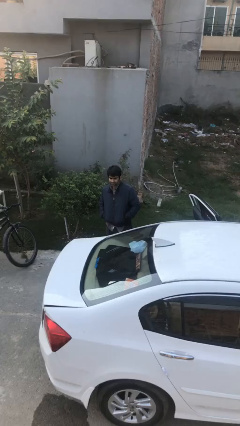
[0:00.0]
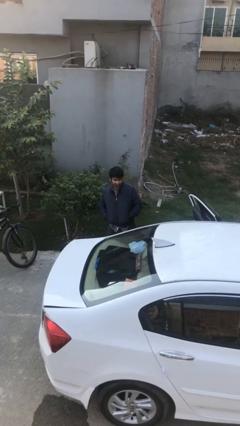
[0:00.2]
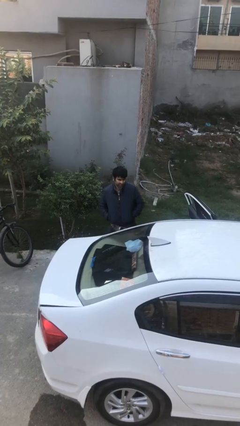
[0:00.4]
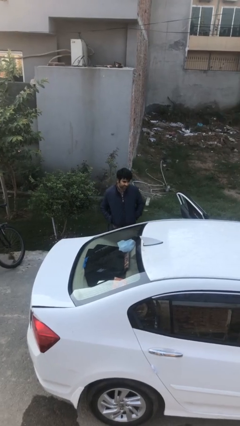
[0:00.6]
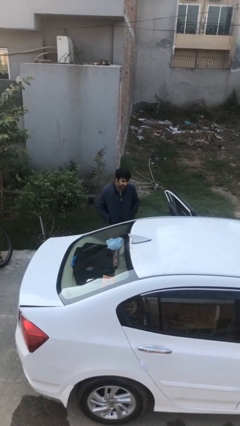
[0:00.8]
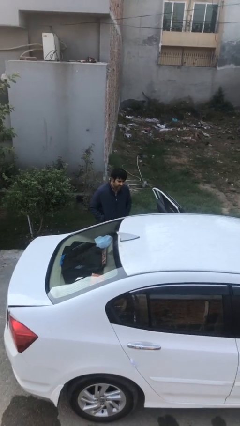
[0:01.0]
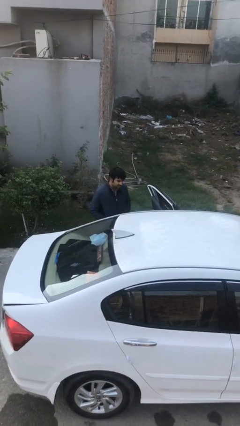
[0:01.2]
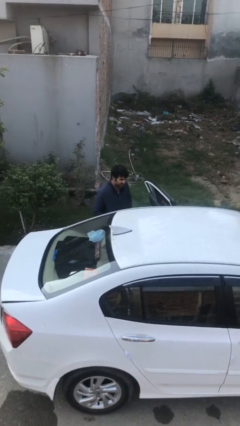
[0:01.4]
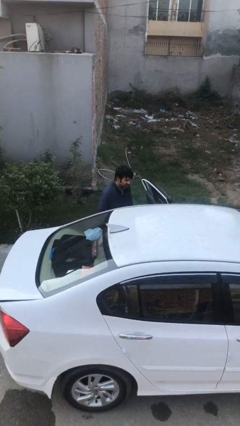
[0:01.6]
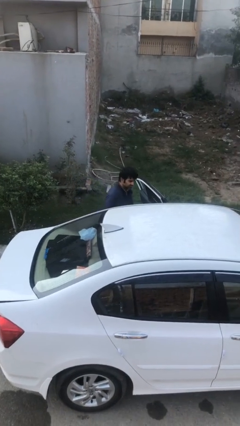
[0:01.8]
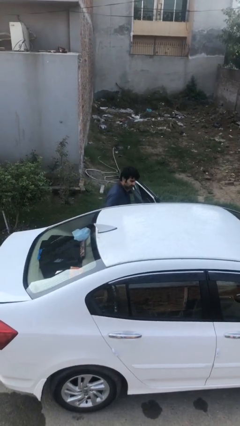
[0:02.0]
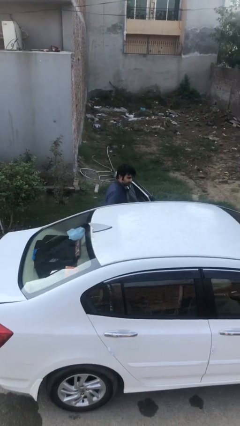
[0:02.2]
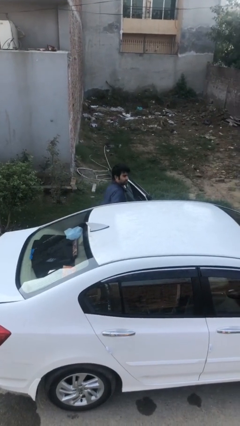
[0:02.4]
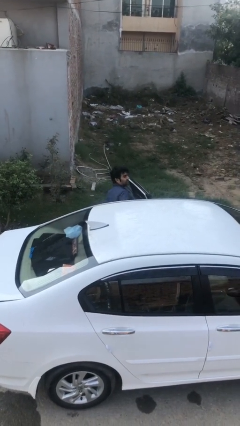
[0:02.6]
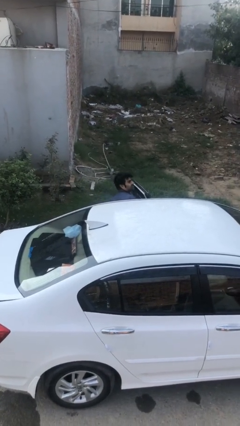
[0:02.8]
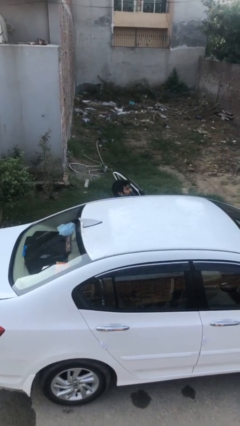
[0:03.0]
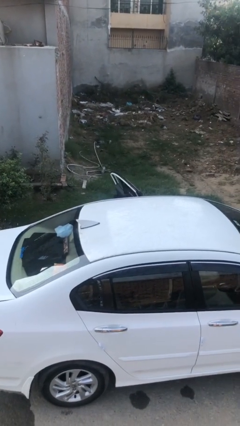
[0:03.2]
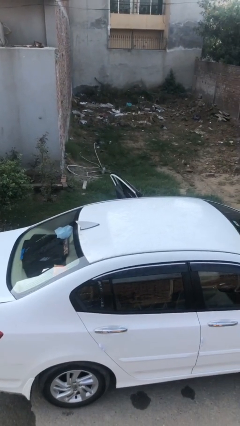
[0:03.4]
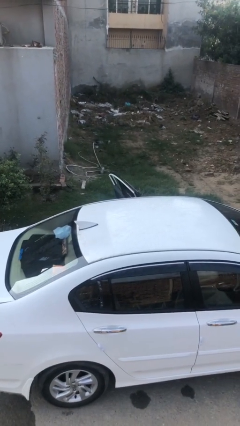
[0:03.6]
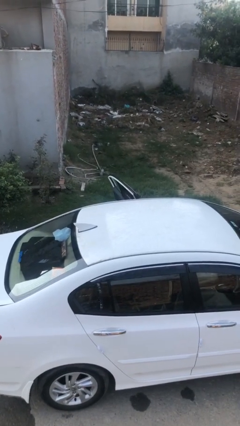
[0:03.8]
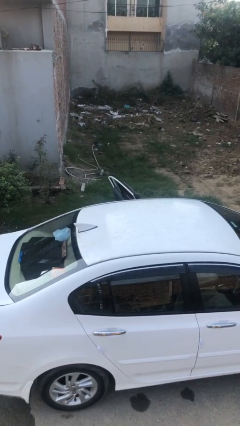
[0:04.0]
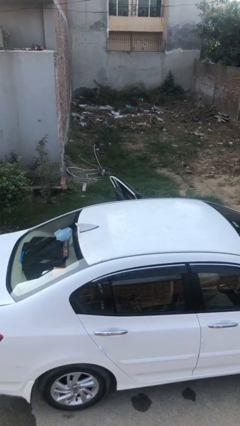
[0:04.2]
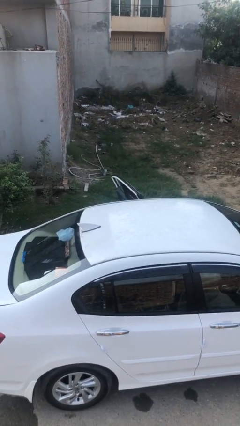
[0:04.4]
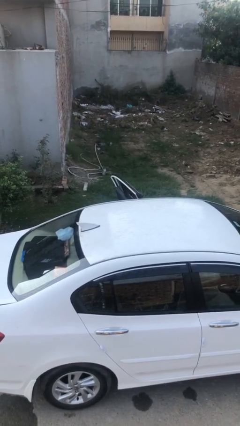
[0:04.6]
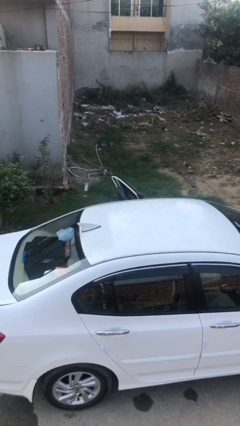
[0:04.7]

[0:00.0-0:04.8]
person enters car

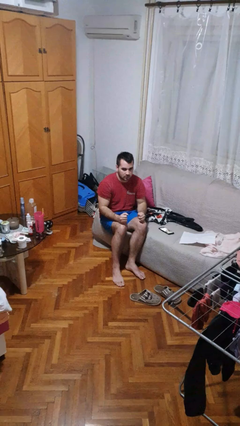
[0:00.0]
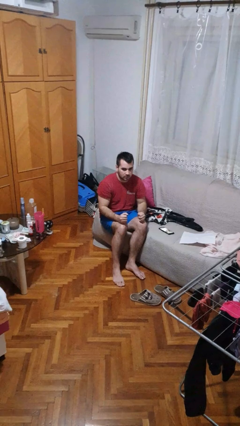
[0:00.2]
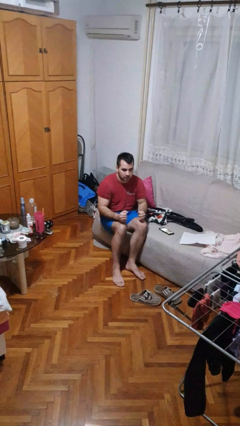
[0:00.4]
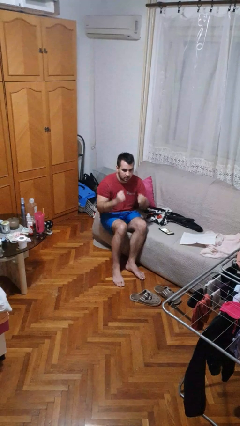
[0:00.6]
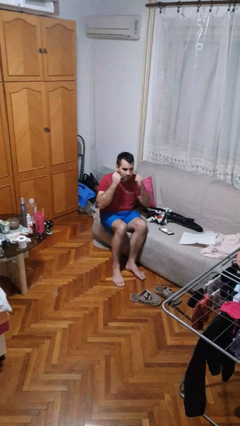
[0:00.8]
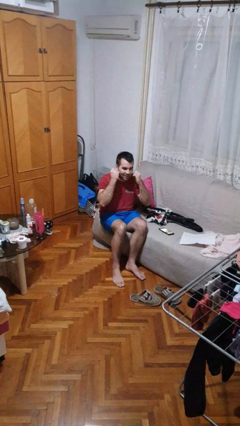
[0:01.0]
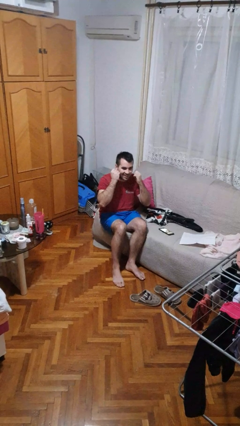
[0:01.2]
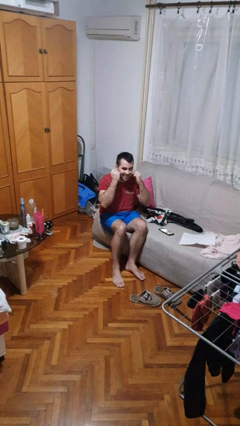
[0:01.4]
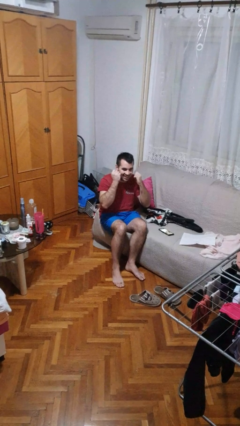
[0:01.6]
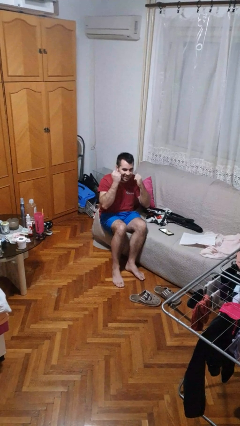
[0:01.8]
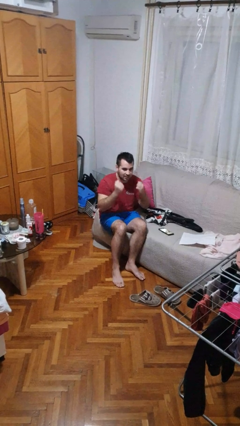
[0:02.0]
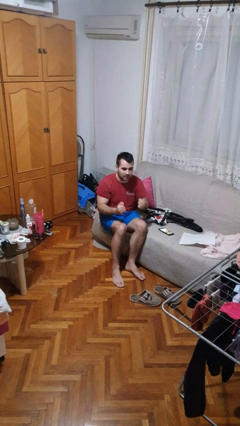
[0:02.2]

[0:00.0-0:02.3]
person flosses

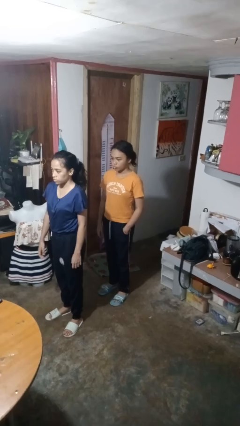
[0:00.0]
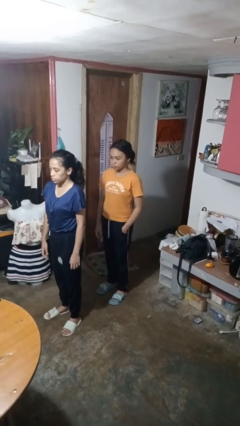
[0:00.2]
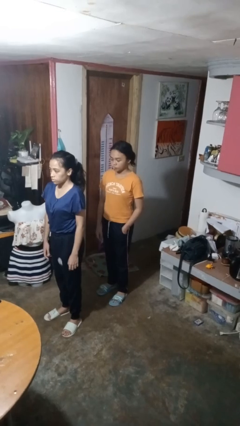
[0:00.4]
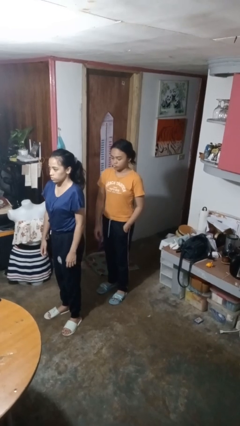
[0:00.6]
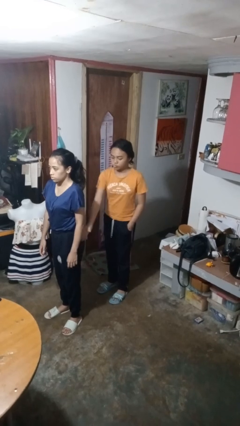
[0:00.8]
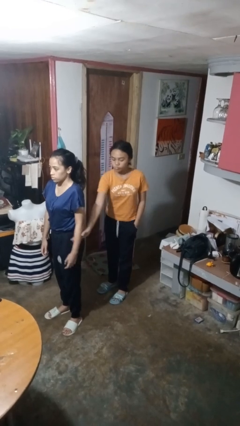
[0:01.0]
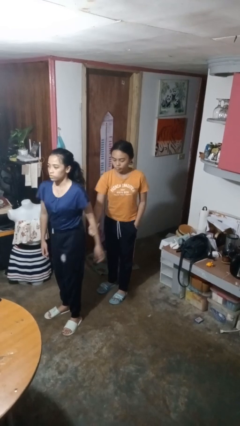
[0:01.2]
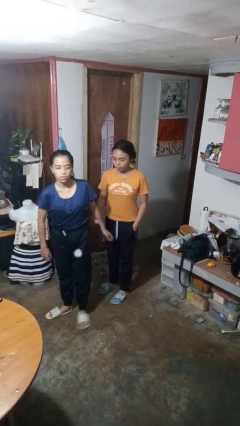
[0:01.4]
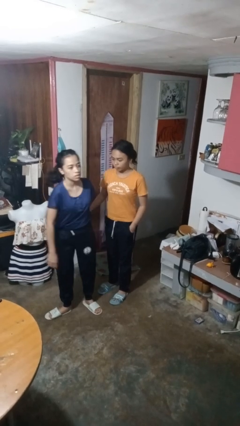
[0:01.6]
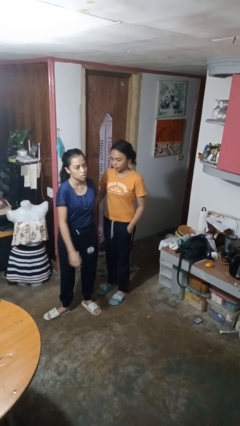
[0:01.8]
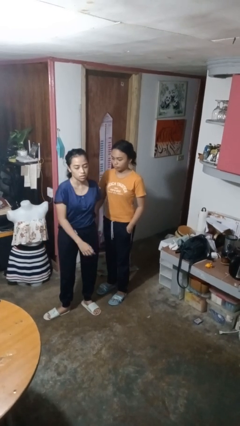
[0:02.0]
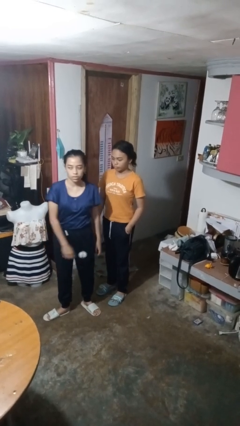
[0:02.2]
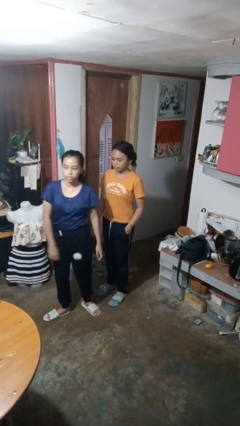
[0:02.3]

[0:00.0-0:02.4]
person grabs person by forearm

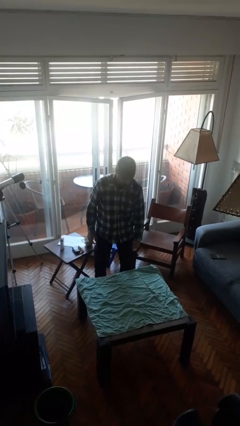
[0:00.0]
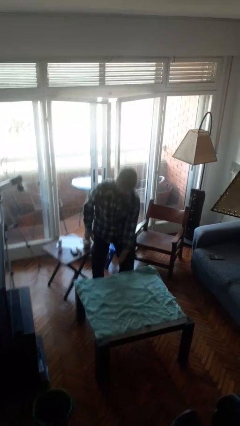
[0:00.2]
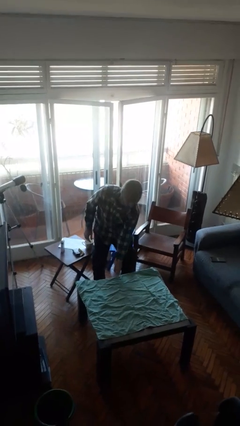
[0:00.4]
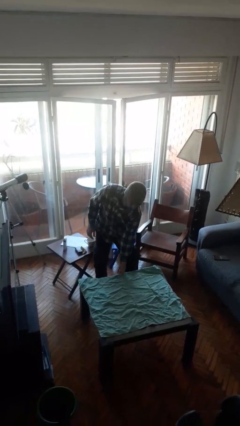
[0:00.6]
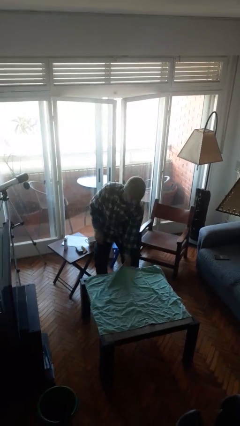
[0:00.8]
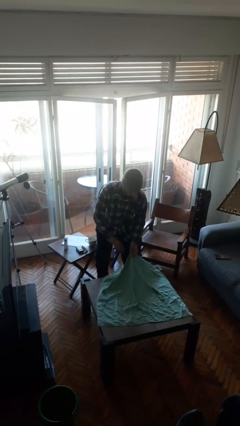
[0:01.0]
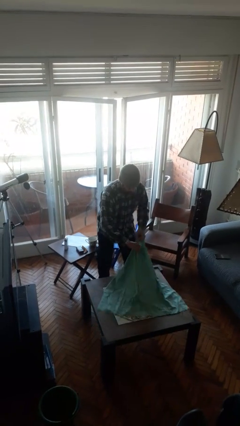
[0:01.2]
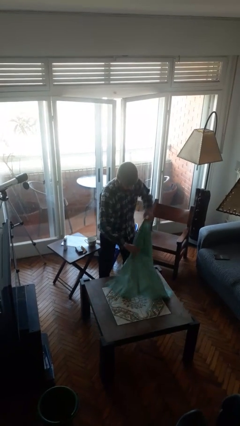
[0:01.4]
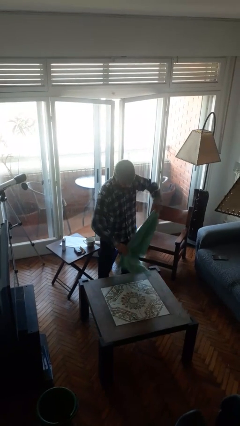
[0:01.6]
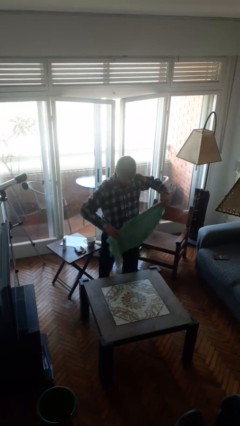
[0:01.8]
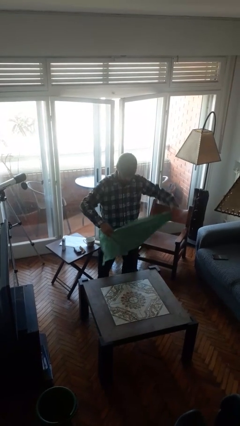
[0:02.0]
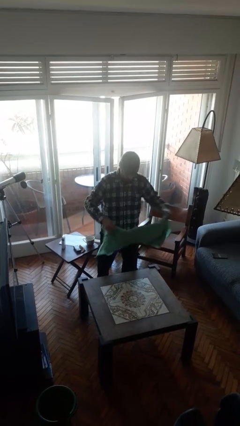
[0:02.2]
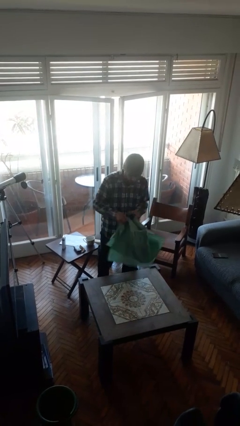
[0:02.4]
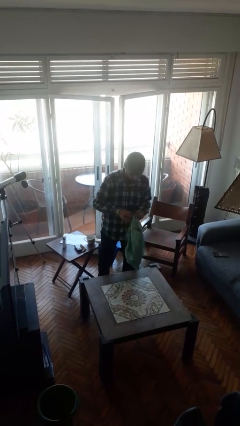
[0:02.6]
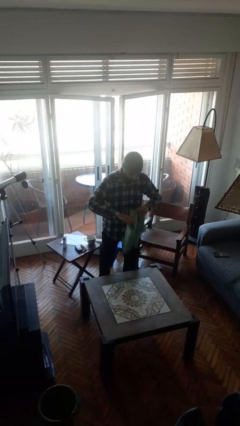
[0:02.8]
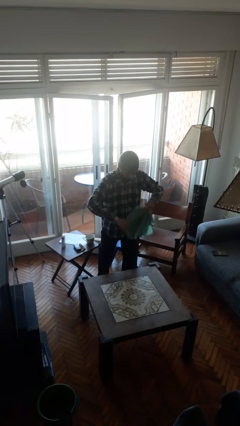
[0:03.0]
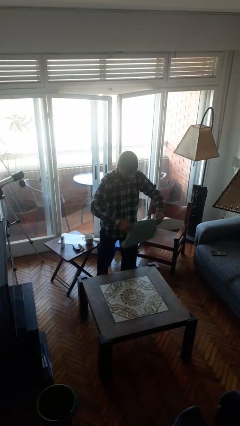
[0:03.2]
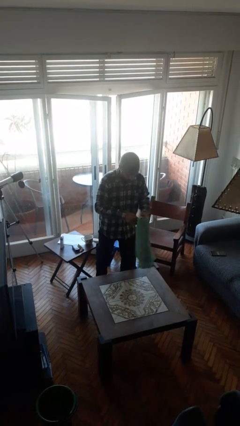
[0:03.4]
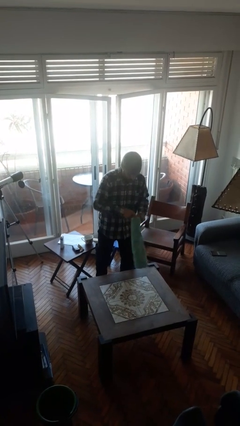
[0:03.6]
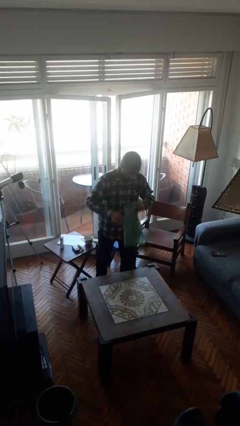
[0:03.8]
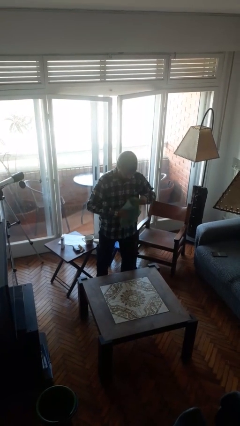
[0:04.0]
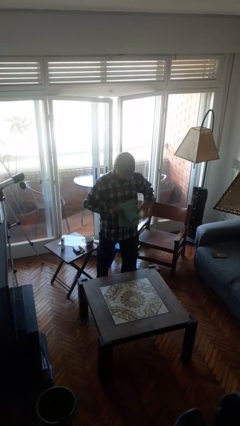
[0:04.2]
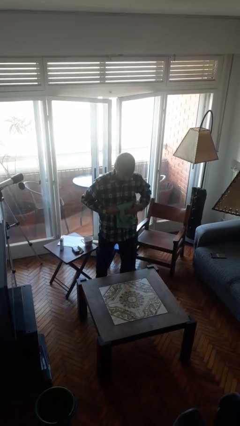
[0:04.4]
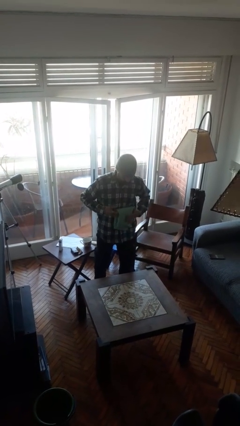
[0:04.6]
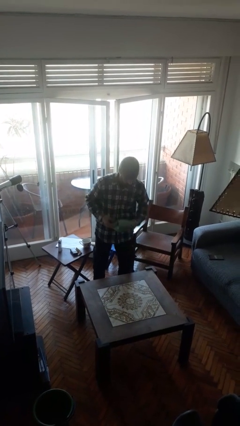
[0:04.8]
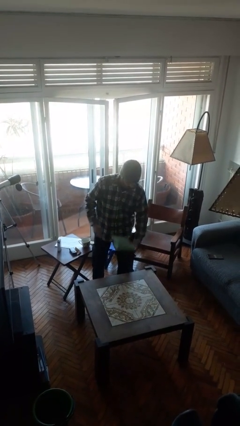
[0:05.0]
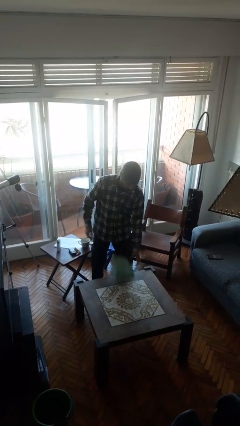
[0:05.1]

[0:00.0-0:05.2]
person folds tablecloth

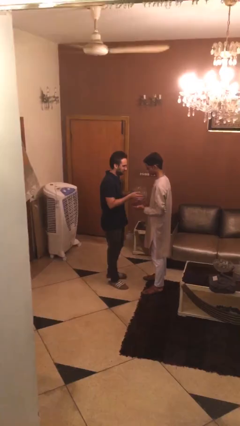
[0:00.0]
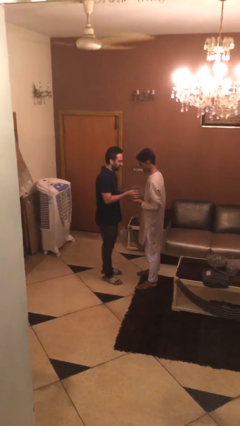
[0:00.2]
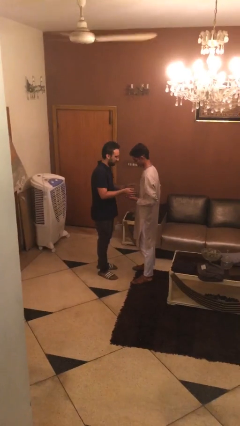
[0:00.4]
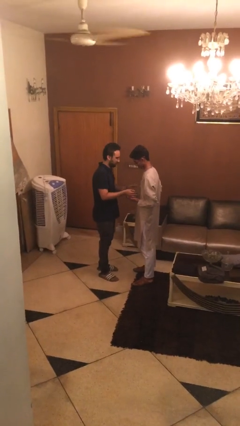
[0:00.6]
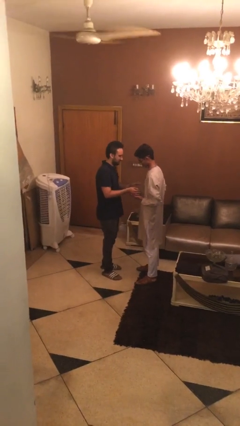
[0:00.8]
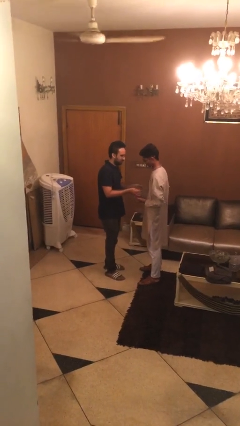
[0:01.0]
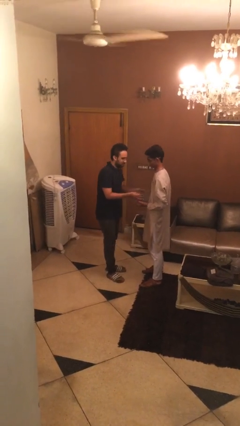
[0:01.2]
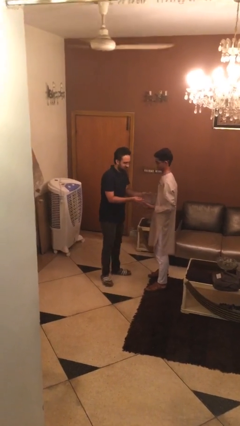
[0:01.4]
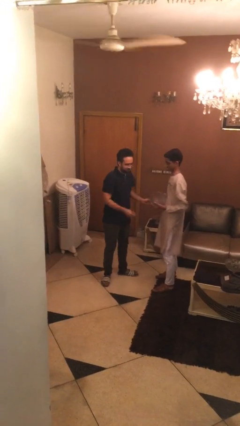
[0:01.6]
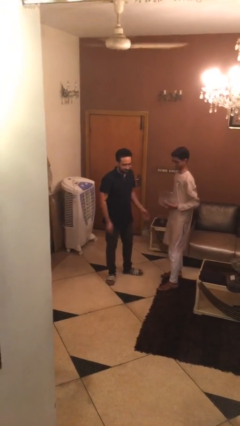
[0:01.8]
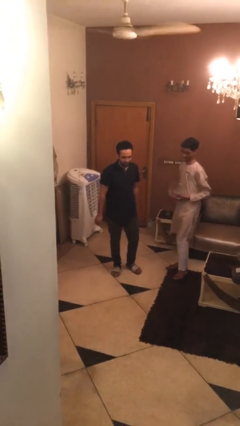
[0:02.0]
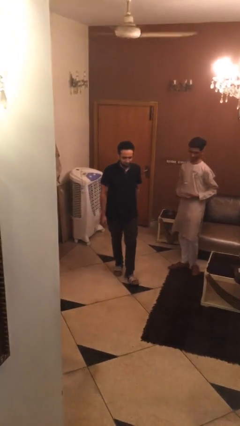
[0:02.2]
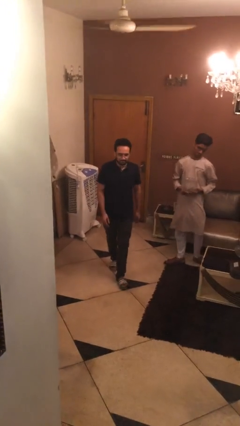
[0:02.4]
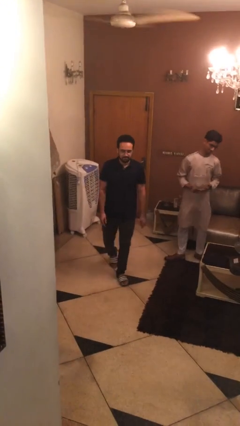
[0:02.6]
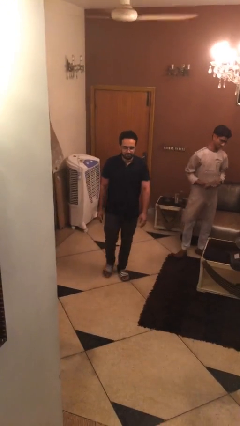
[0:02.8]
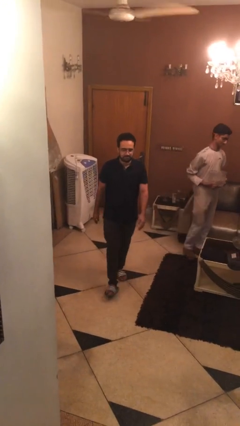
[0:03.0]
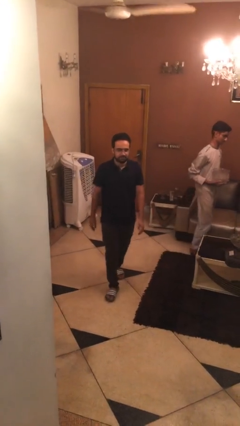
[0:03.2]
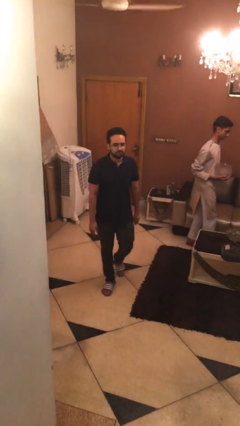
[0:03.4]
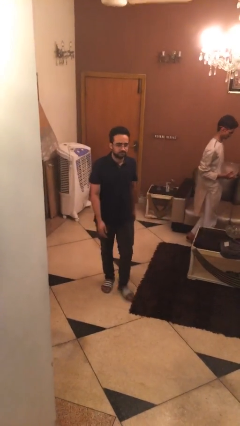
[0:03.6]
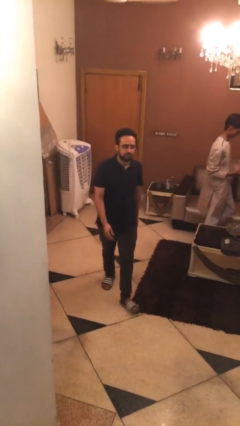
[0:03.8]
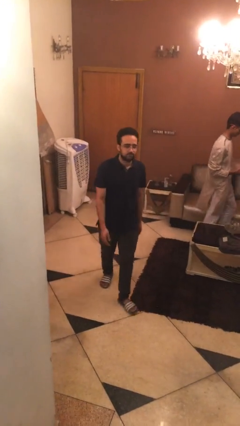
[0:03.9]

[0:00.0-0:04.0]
person transfers object to person
